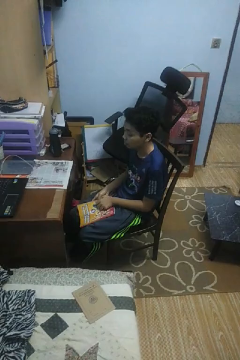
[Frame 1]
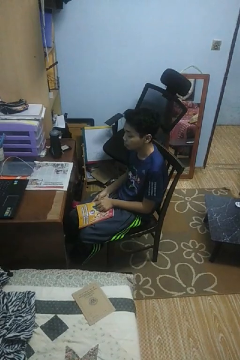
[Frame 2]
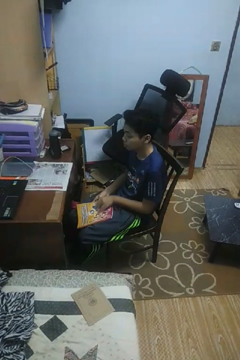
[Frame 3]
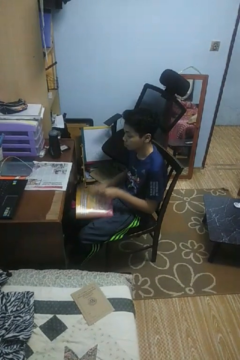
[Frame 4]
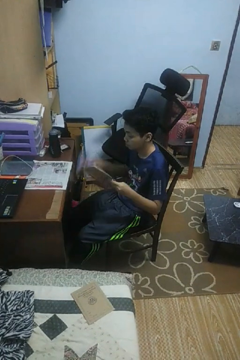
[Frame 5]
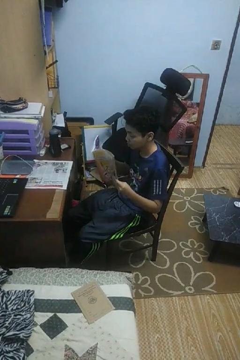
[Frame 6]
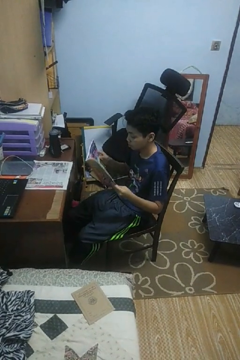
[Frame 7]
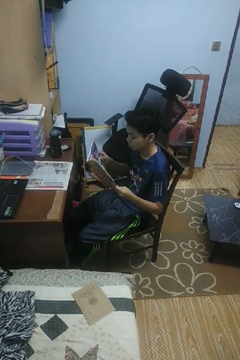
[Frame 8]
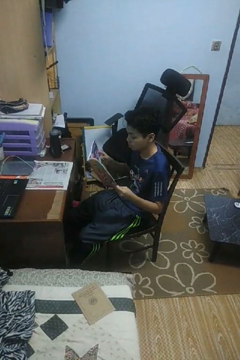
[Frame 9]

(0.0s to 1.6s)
person reads magazine

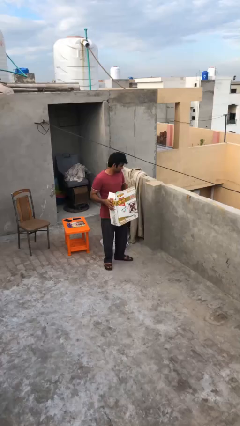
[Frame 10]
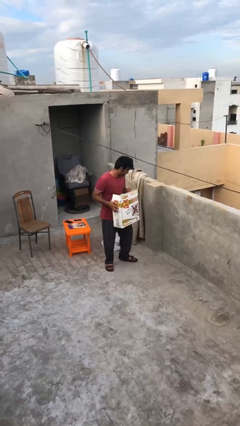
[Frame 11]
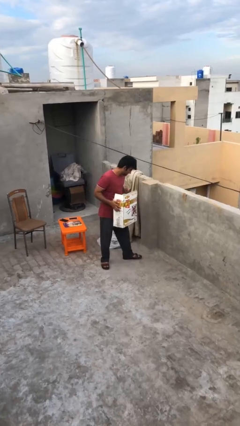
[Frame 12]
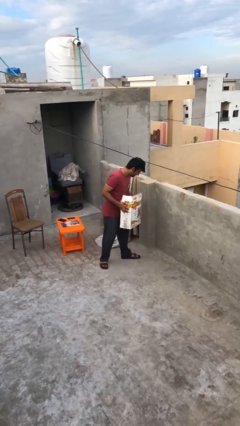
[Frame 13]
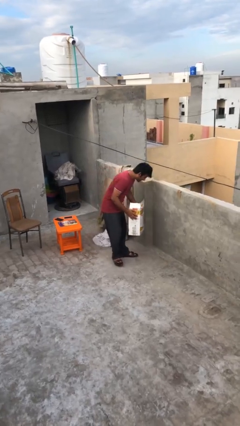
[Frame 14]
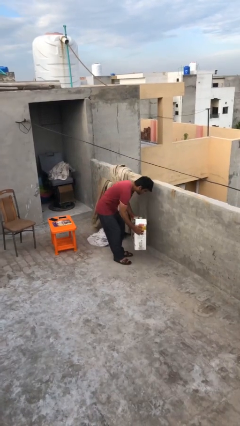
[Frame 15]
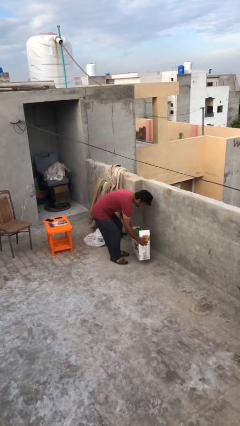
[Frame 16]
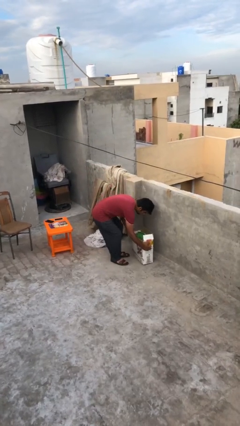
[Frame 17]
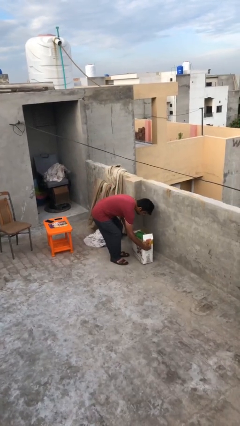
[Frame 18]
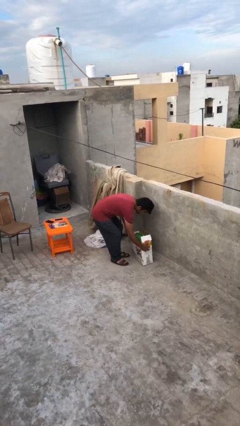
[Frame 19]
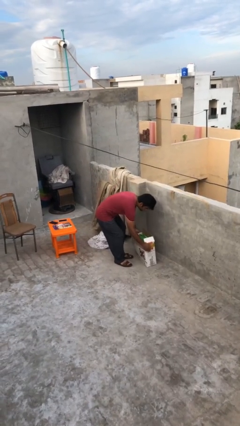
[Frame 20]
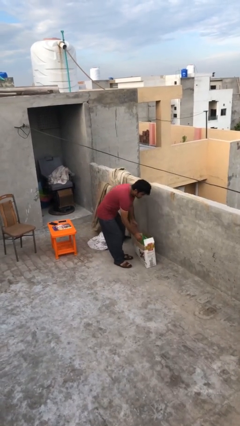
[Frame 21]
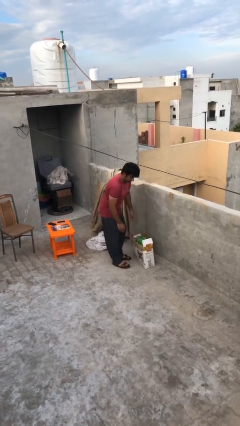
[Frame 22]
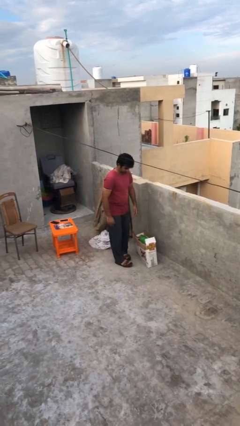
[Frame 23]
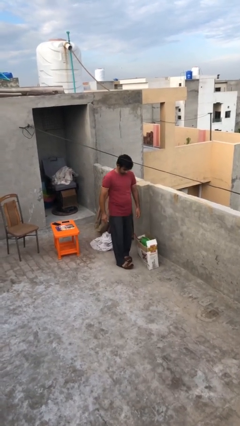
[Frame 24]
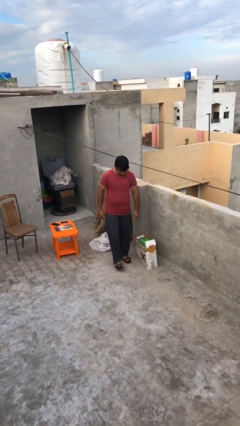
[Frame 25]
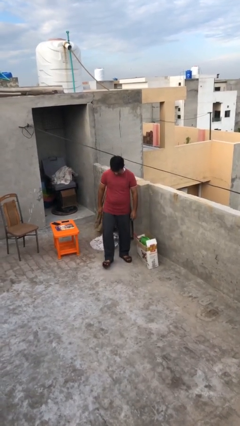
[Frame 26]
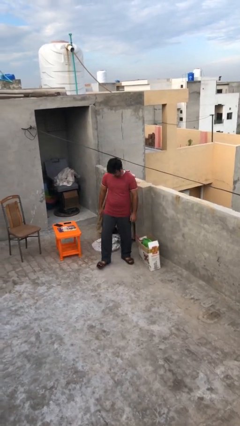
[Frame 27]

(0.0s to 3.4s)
person puts down object on floor

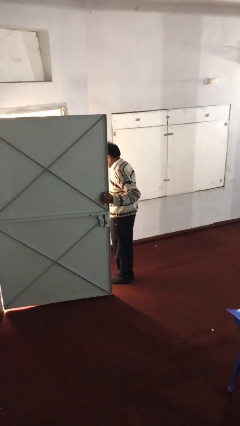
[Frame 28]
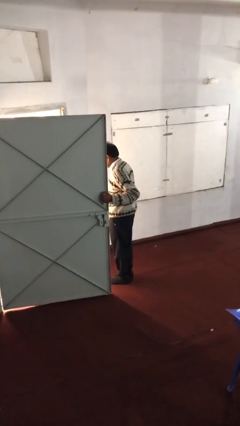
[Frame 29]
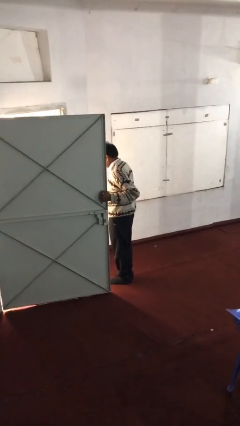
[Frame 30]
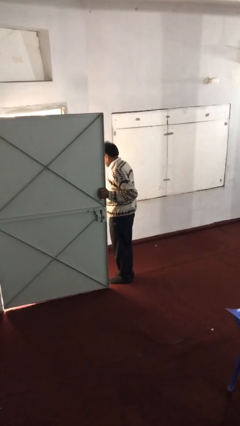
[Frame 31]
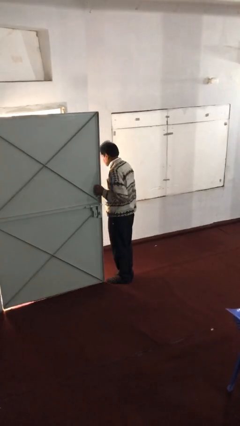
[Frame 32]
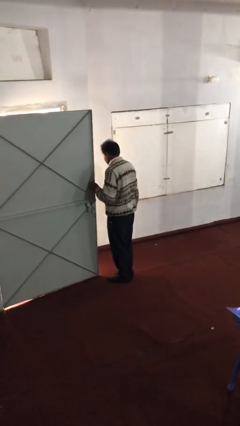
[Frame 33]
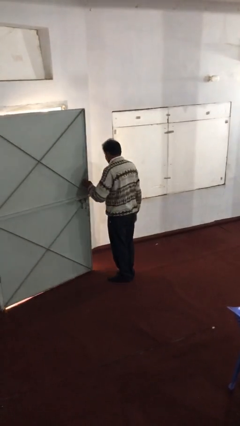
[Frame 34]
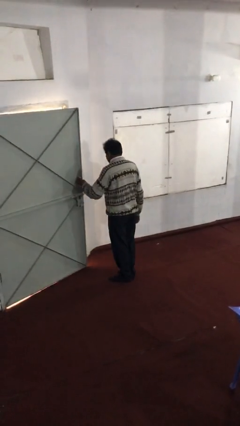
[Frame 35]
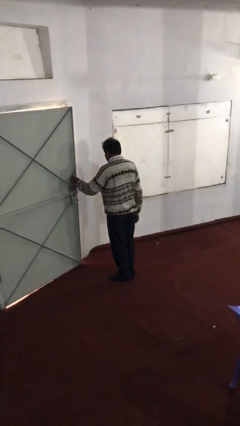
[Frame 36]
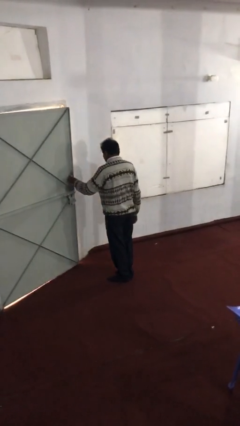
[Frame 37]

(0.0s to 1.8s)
person closes facility door

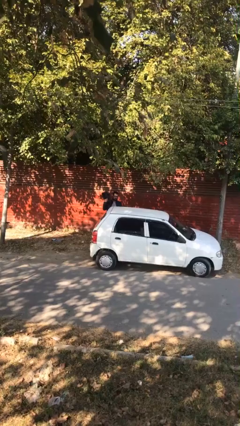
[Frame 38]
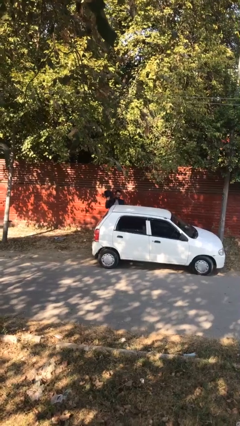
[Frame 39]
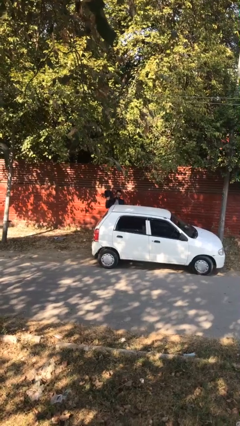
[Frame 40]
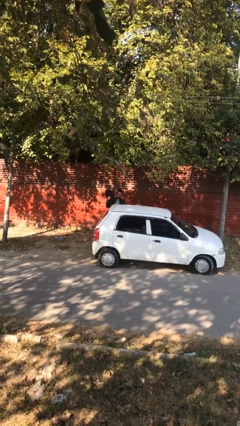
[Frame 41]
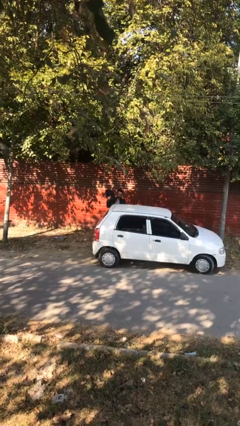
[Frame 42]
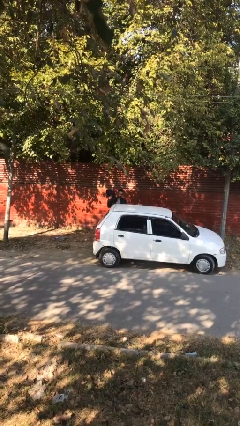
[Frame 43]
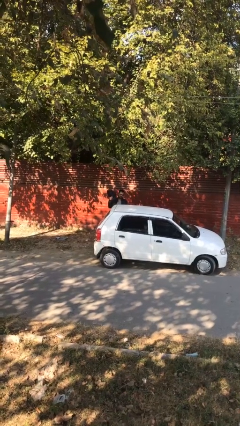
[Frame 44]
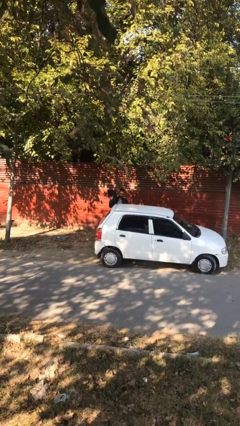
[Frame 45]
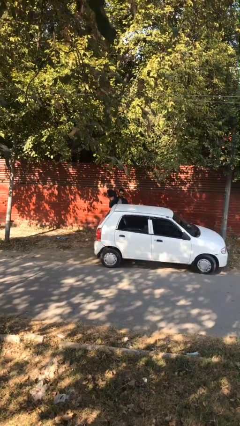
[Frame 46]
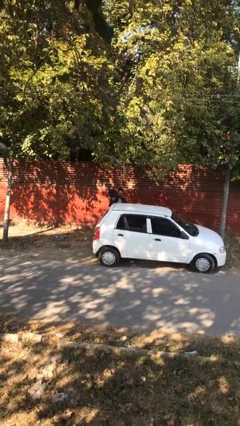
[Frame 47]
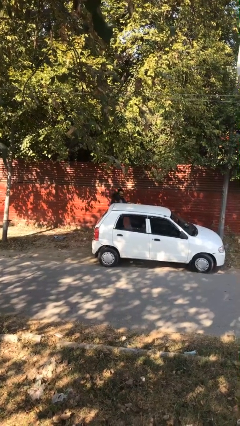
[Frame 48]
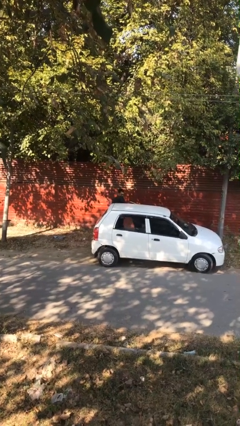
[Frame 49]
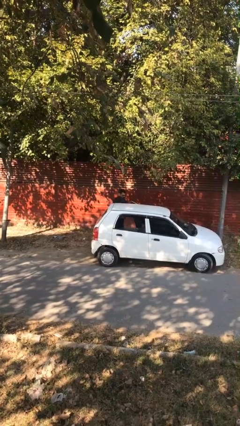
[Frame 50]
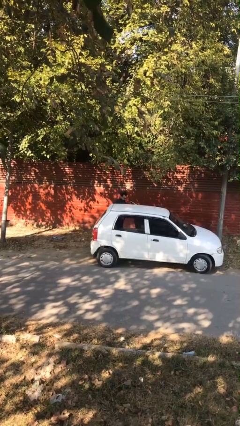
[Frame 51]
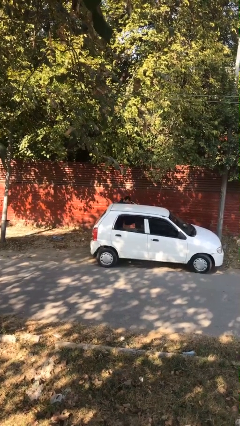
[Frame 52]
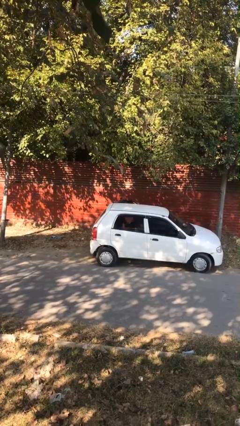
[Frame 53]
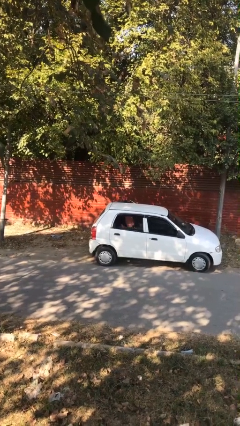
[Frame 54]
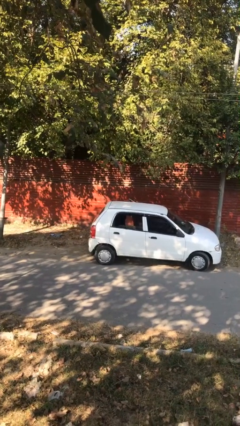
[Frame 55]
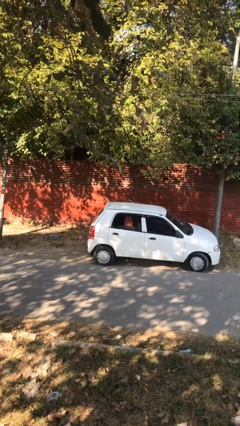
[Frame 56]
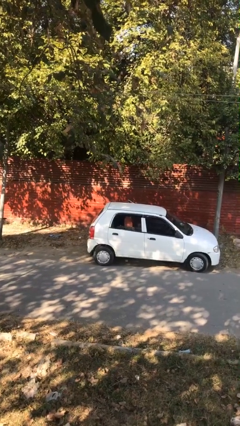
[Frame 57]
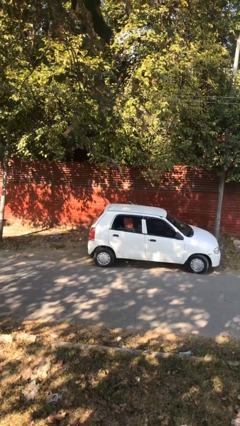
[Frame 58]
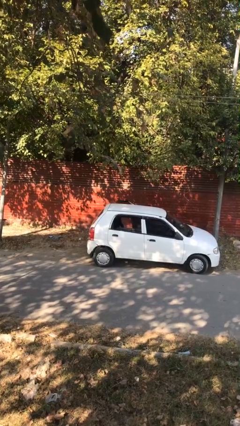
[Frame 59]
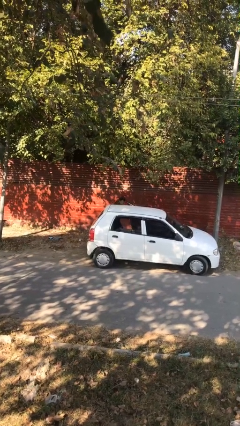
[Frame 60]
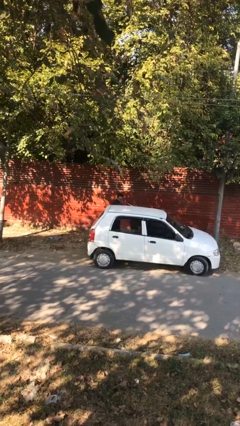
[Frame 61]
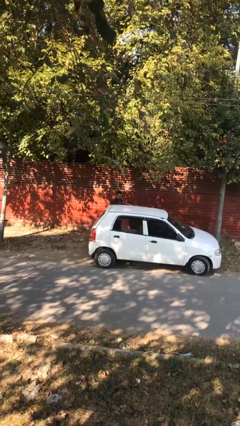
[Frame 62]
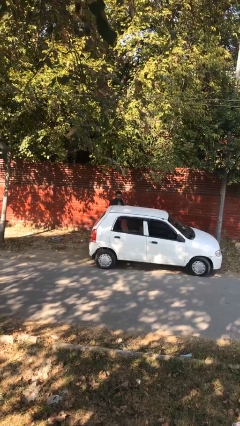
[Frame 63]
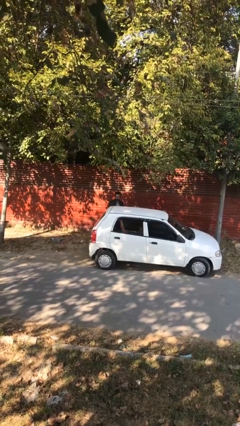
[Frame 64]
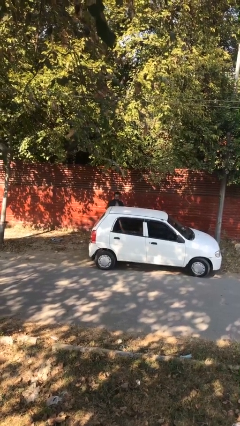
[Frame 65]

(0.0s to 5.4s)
person loads car

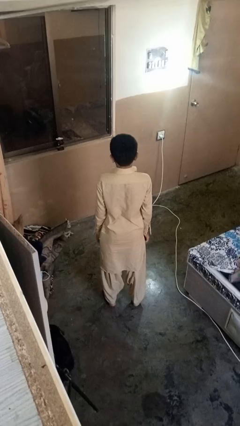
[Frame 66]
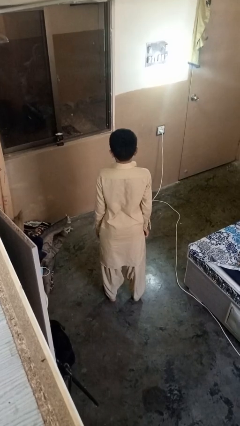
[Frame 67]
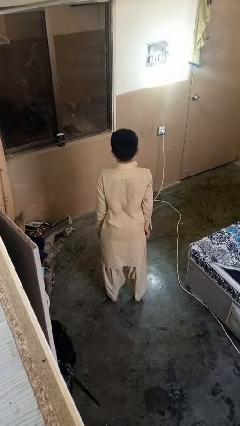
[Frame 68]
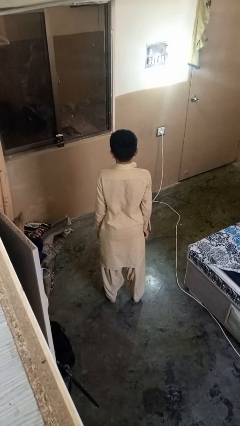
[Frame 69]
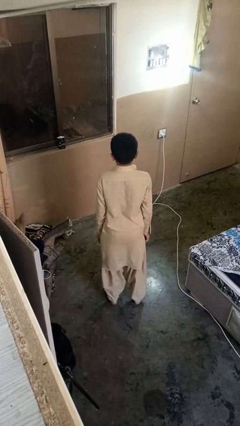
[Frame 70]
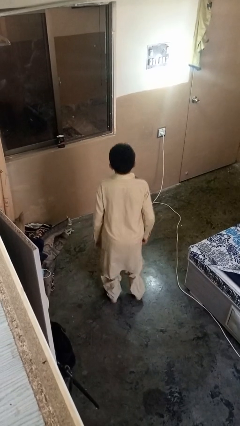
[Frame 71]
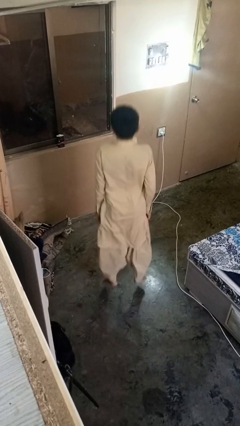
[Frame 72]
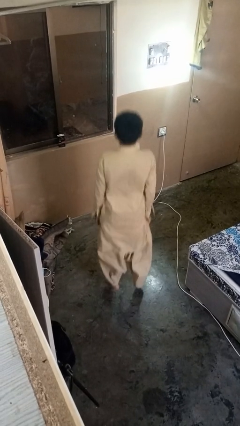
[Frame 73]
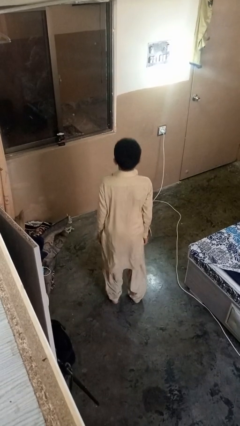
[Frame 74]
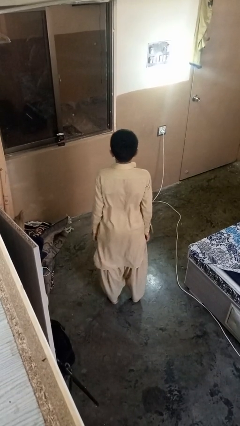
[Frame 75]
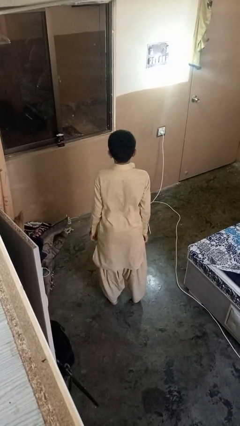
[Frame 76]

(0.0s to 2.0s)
person jumps

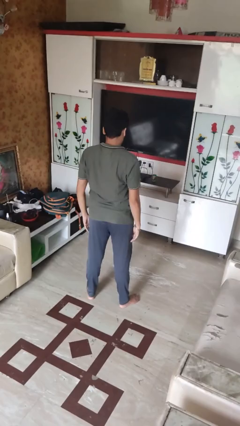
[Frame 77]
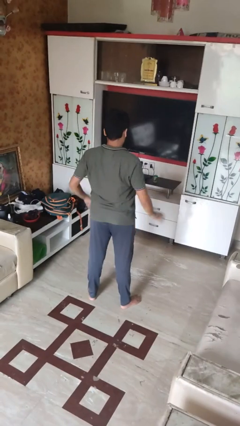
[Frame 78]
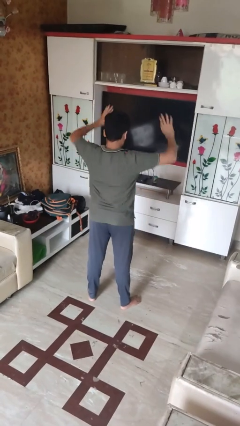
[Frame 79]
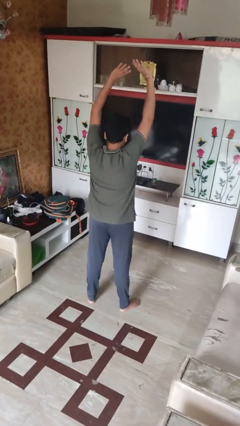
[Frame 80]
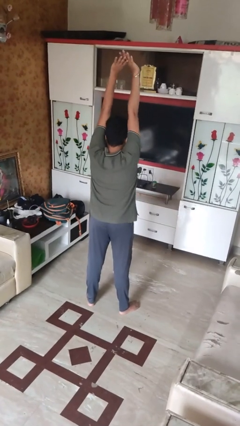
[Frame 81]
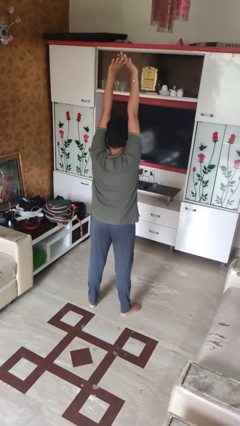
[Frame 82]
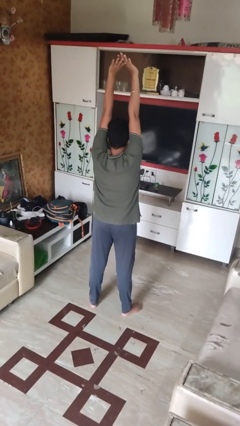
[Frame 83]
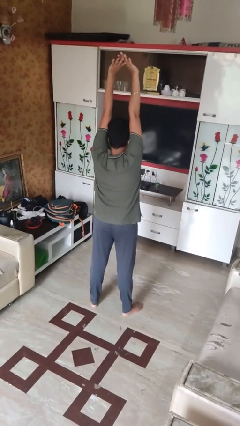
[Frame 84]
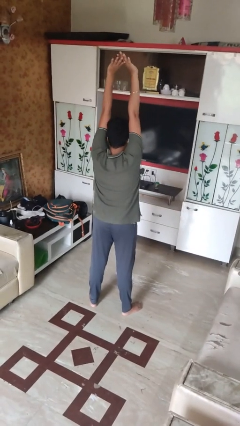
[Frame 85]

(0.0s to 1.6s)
person stretches arms over head

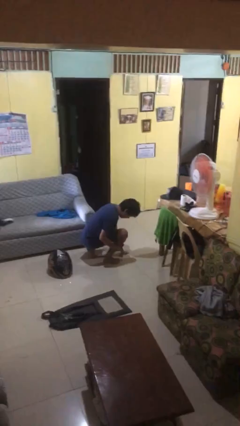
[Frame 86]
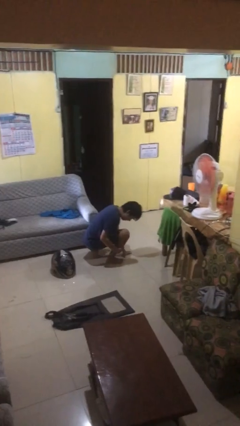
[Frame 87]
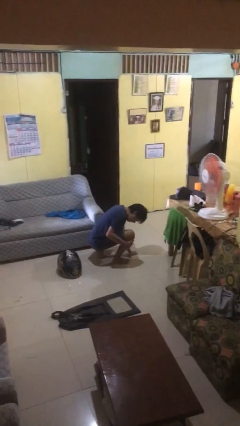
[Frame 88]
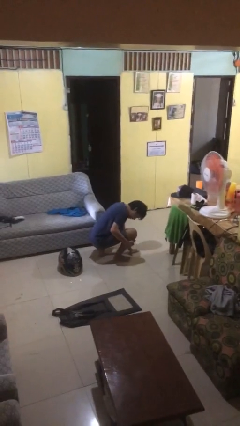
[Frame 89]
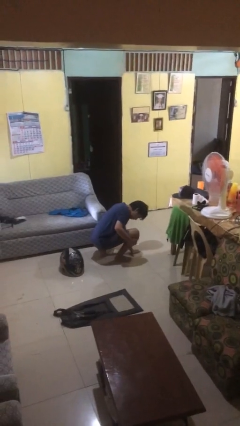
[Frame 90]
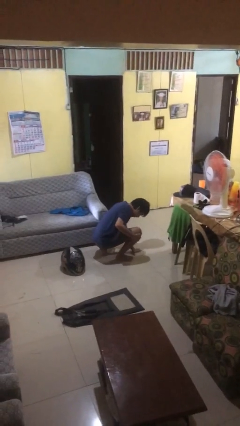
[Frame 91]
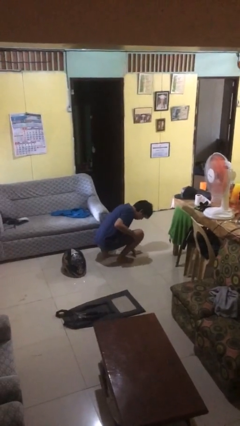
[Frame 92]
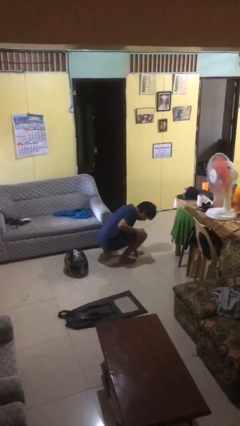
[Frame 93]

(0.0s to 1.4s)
person lies down on floor

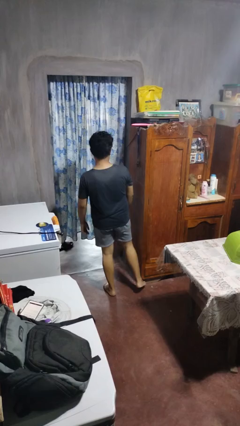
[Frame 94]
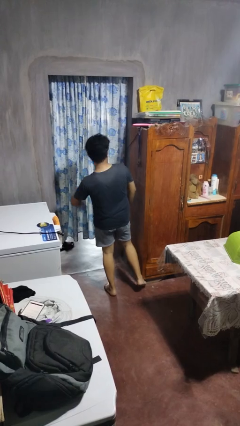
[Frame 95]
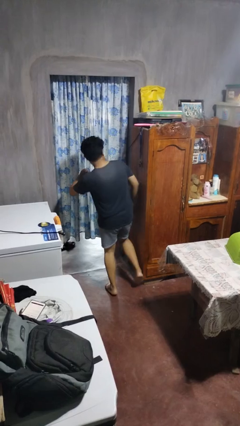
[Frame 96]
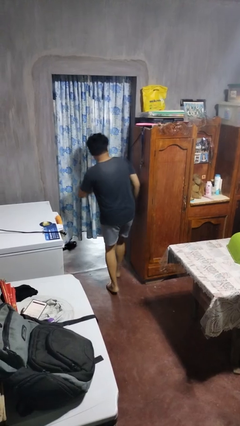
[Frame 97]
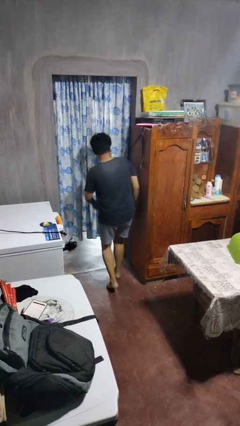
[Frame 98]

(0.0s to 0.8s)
person stubs toe
